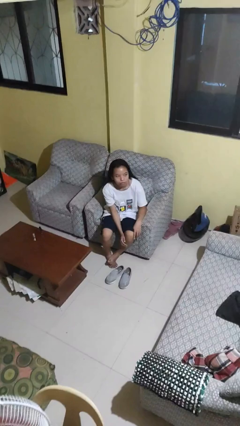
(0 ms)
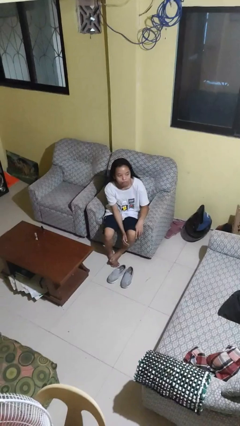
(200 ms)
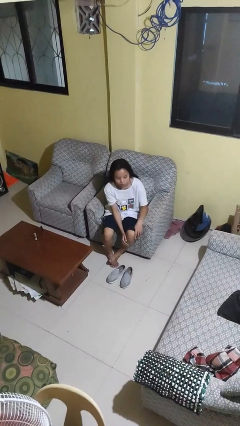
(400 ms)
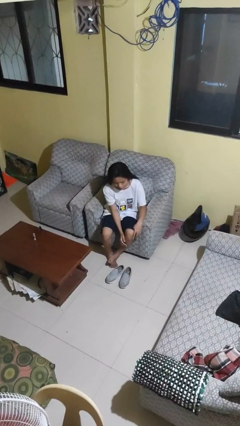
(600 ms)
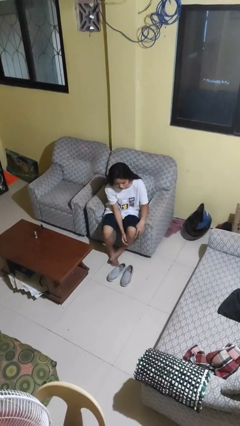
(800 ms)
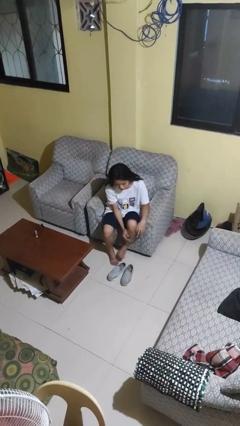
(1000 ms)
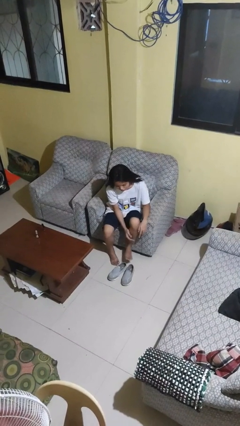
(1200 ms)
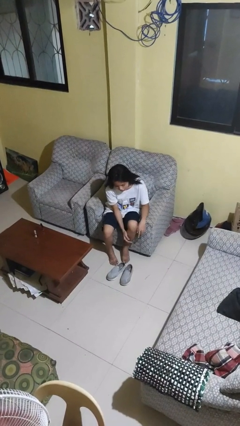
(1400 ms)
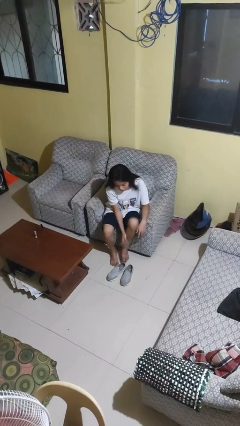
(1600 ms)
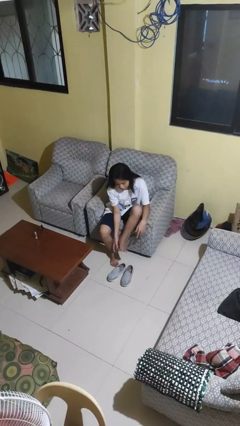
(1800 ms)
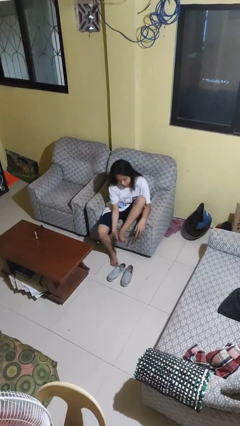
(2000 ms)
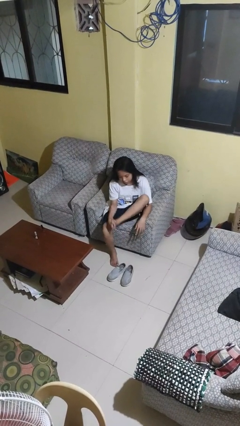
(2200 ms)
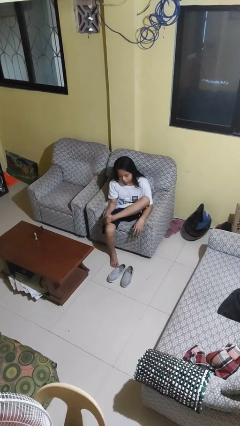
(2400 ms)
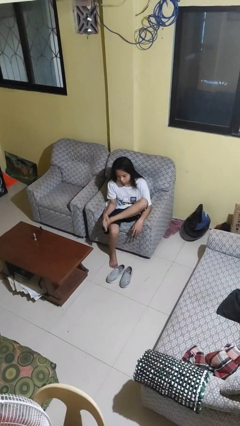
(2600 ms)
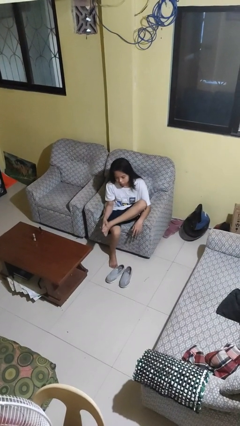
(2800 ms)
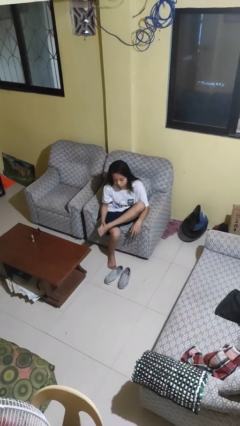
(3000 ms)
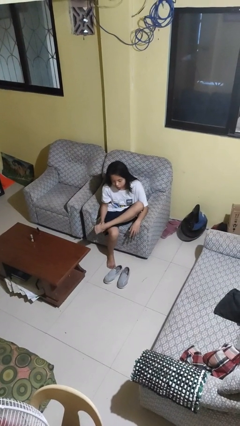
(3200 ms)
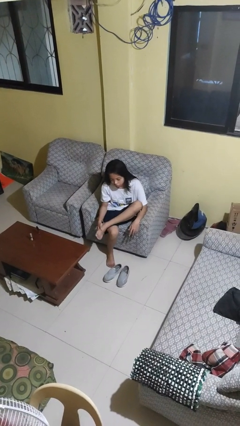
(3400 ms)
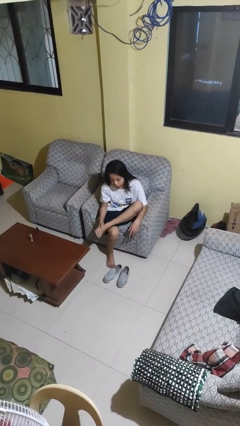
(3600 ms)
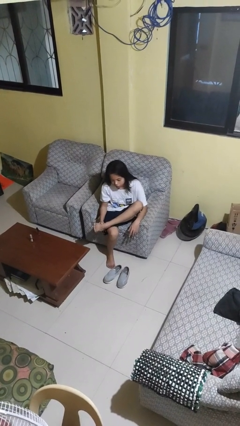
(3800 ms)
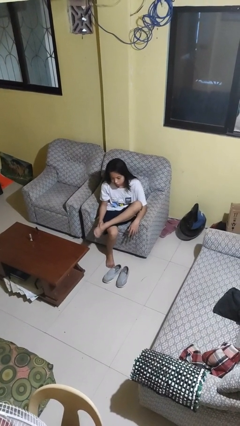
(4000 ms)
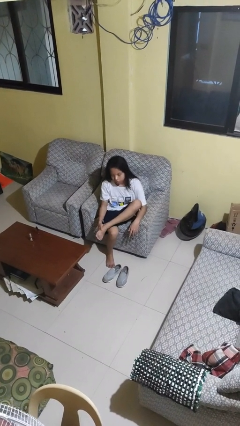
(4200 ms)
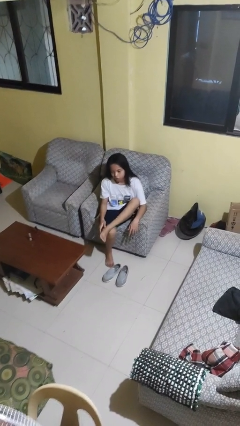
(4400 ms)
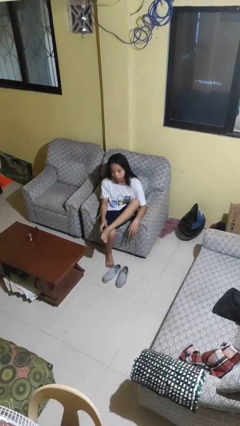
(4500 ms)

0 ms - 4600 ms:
person rubs foot

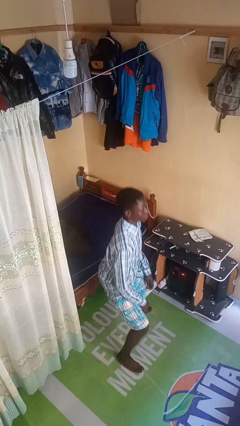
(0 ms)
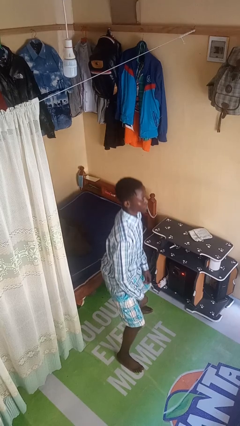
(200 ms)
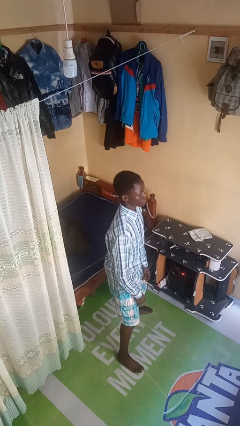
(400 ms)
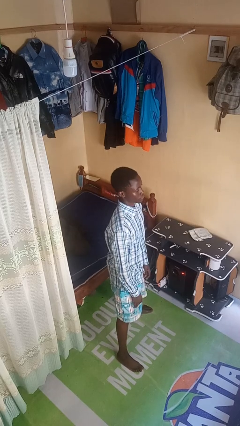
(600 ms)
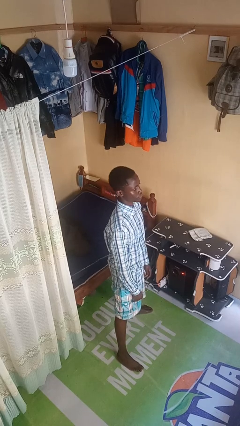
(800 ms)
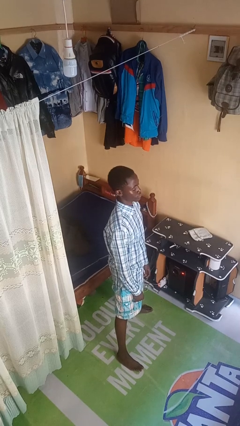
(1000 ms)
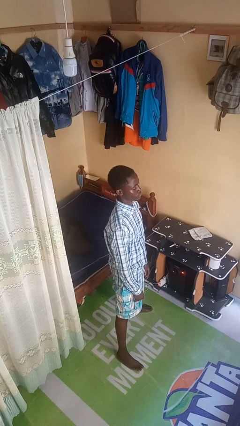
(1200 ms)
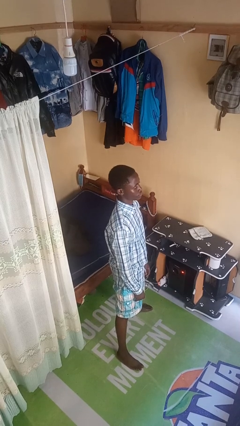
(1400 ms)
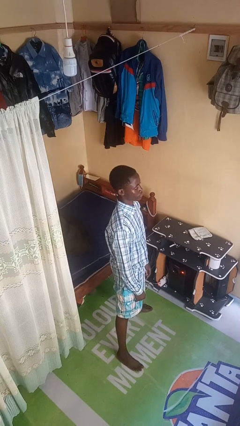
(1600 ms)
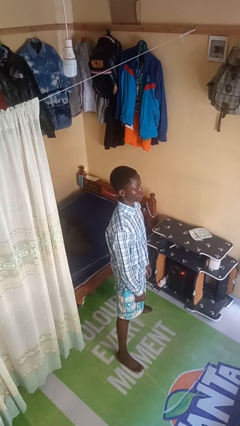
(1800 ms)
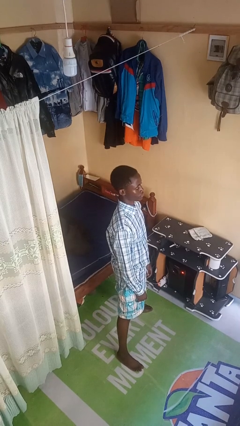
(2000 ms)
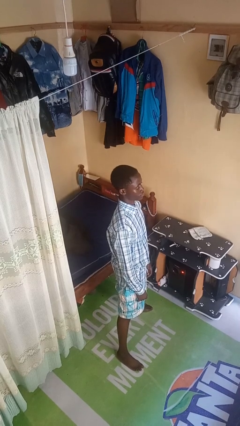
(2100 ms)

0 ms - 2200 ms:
person stands up

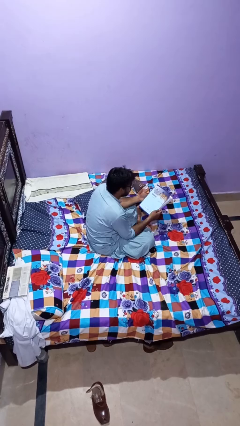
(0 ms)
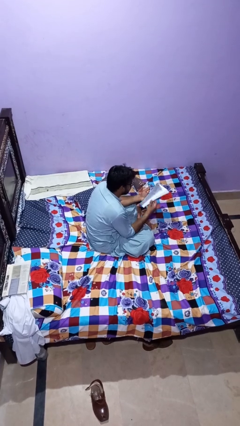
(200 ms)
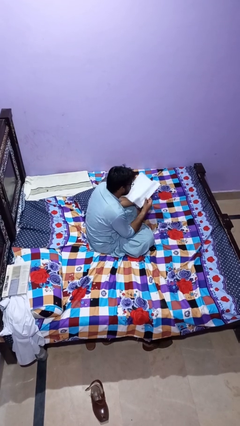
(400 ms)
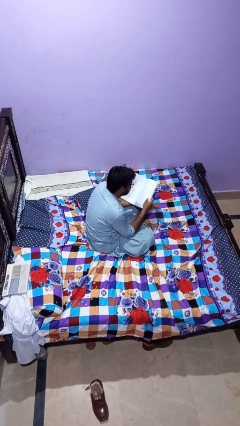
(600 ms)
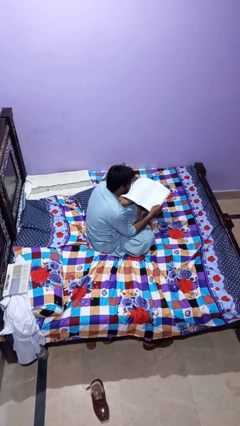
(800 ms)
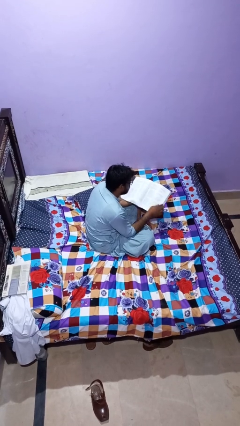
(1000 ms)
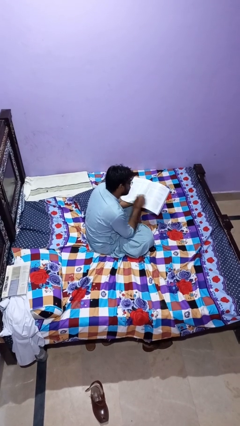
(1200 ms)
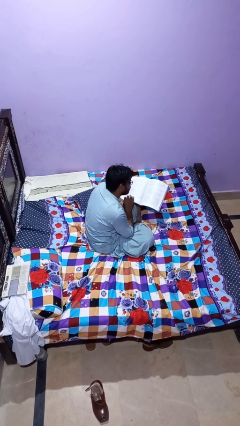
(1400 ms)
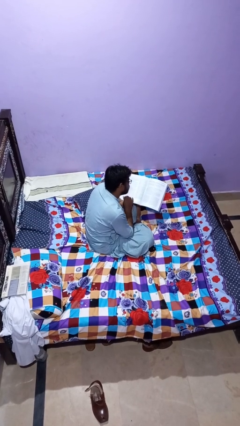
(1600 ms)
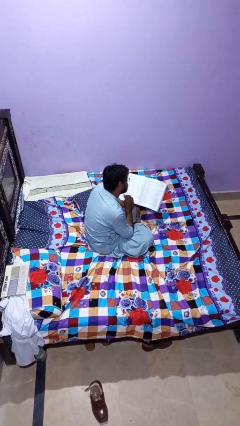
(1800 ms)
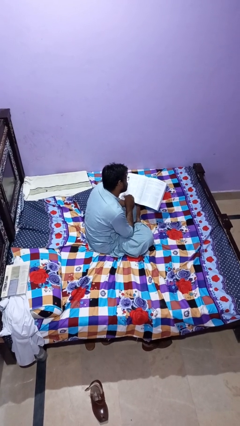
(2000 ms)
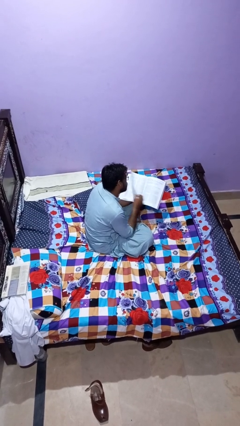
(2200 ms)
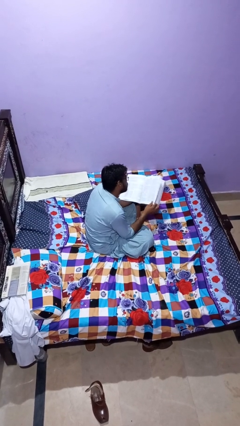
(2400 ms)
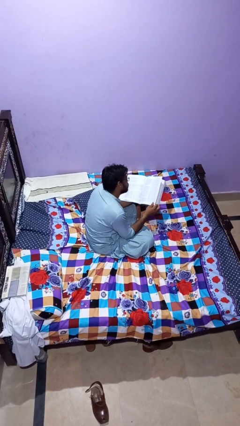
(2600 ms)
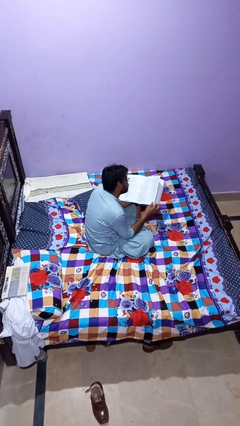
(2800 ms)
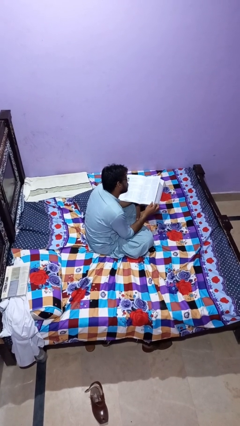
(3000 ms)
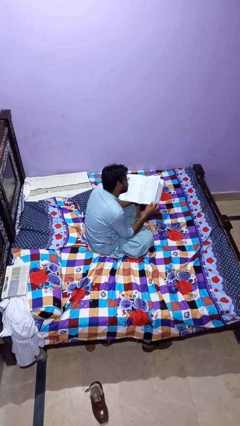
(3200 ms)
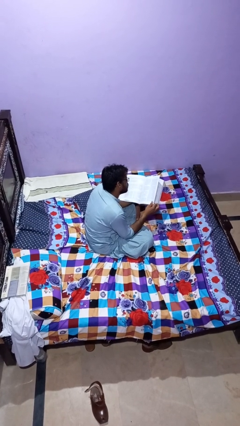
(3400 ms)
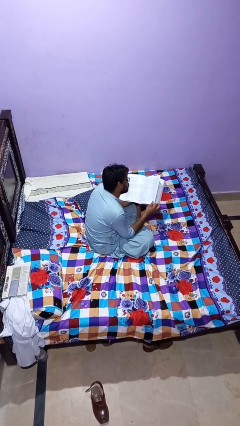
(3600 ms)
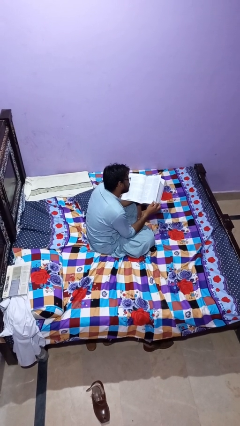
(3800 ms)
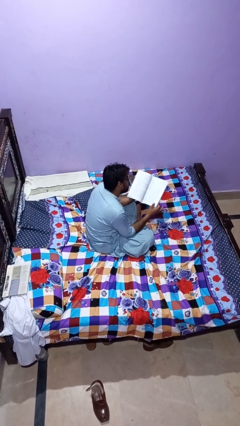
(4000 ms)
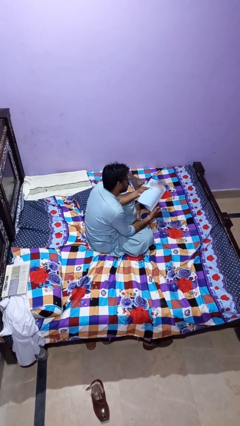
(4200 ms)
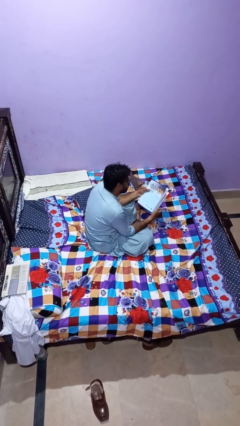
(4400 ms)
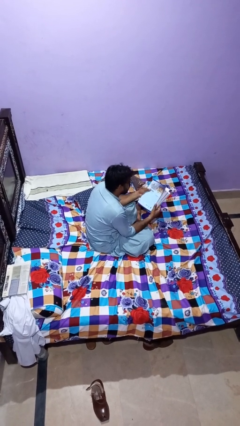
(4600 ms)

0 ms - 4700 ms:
person reads magazine

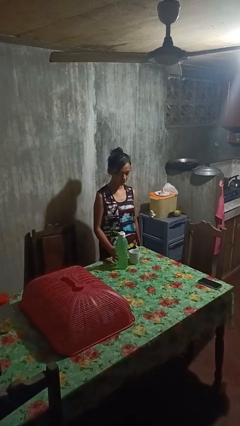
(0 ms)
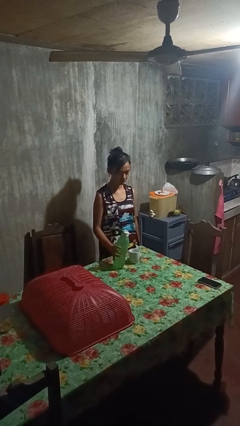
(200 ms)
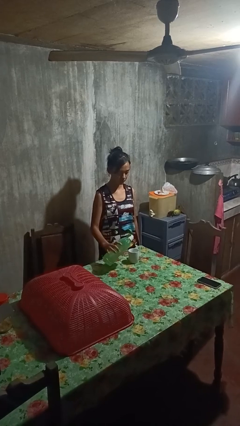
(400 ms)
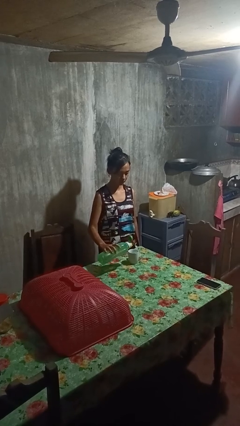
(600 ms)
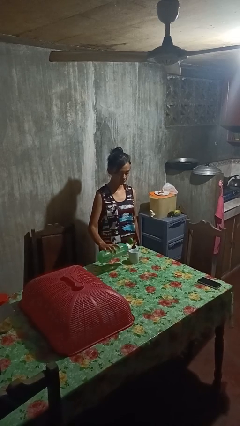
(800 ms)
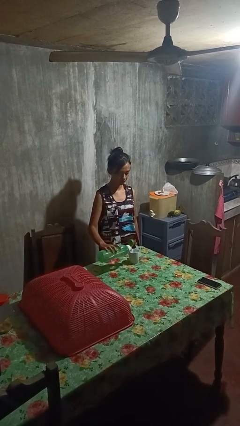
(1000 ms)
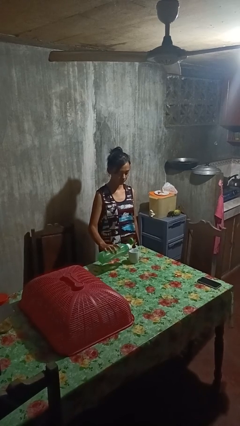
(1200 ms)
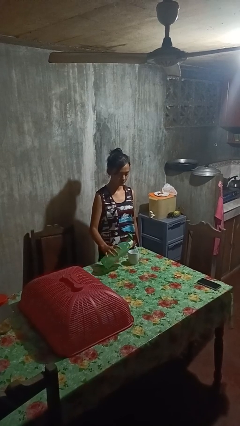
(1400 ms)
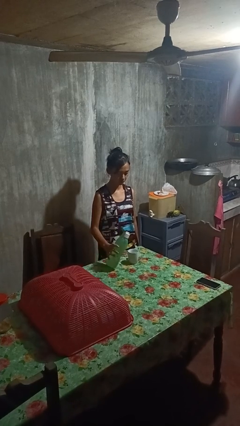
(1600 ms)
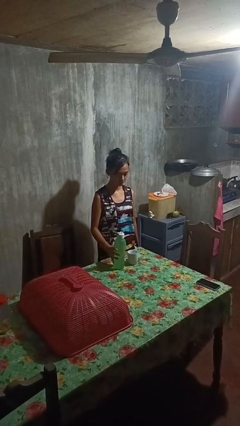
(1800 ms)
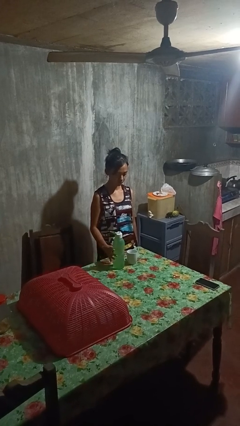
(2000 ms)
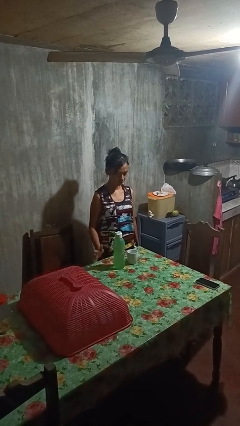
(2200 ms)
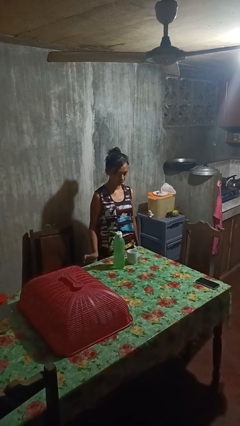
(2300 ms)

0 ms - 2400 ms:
person pours liquid into cup

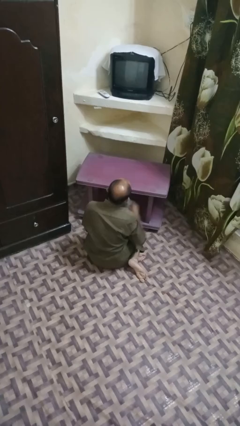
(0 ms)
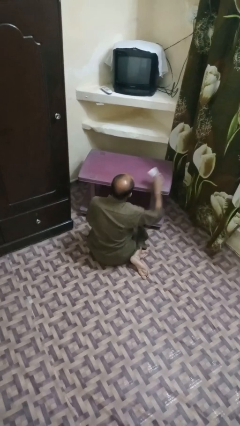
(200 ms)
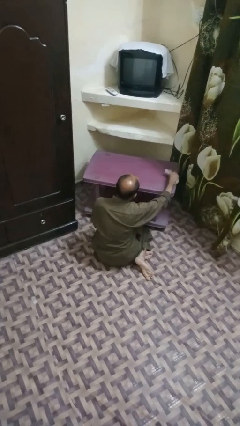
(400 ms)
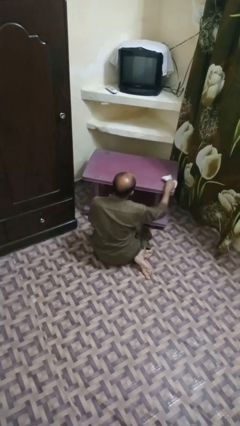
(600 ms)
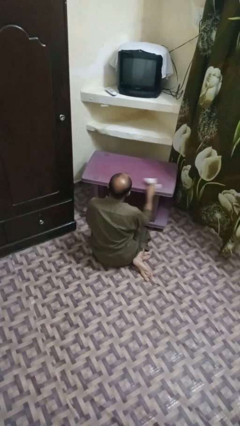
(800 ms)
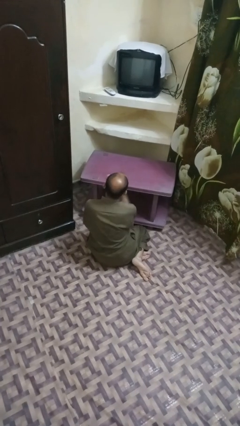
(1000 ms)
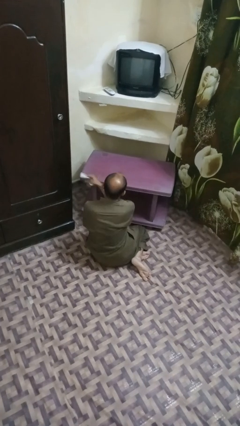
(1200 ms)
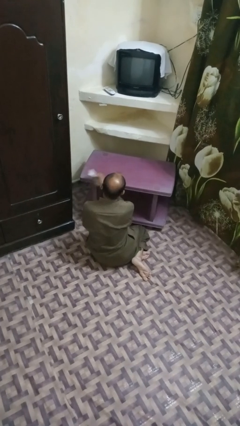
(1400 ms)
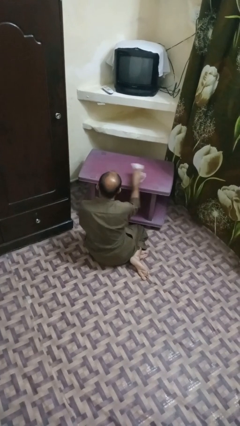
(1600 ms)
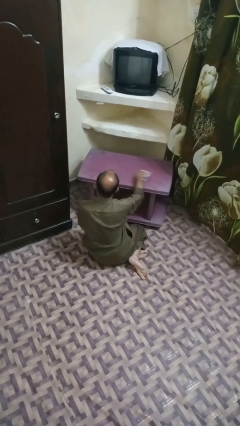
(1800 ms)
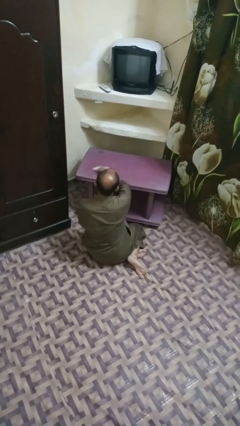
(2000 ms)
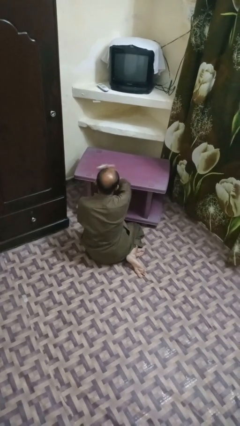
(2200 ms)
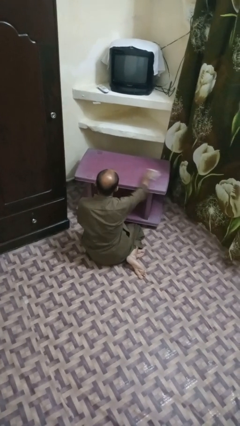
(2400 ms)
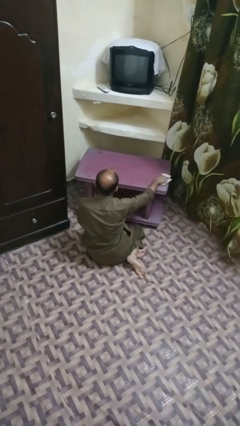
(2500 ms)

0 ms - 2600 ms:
person cleans table with rag

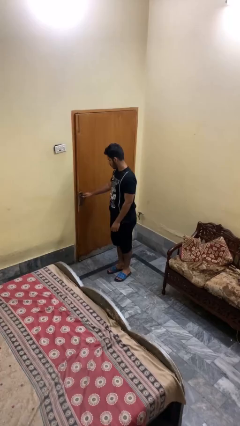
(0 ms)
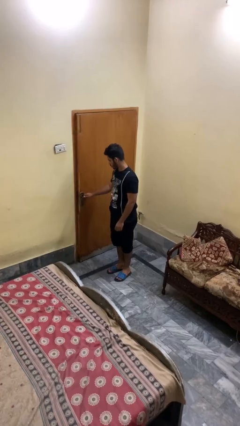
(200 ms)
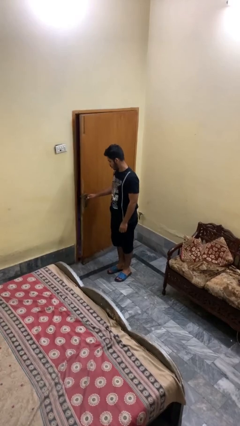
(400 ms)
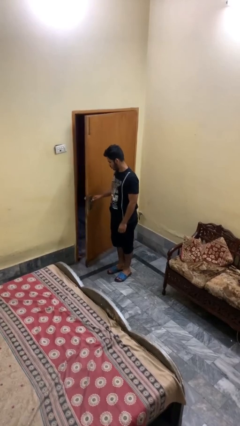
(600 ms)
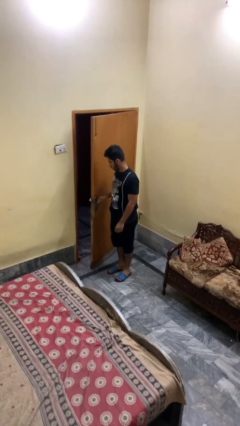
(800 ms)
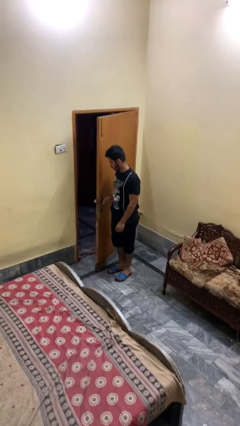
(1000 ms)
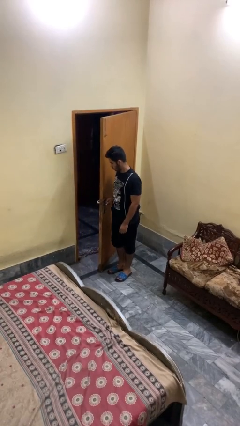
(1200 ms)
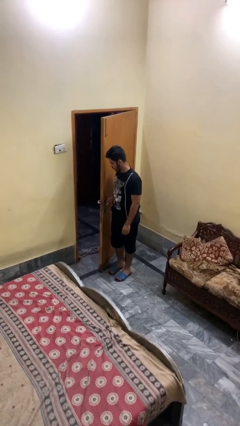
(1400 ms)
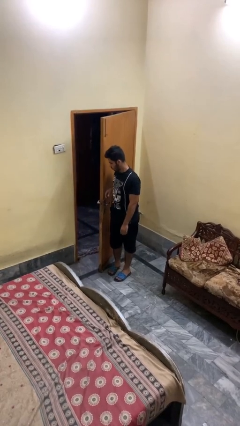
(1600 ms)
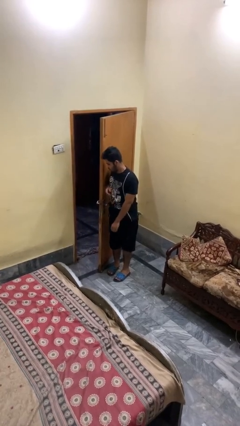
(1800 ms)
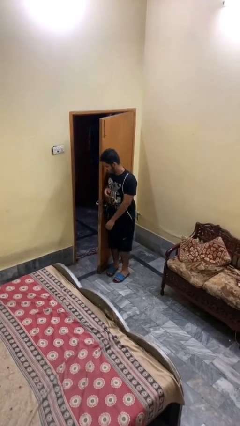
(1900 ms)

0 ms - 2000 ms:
person opens facility door
